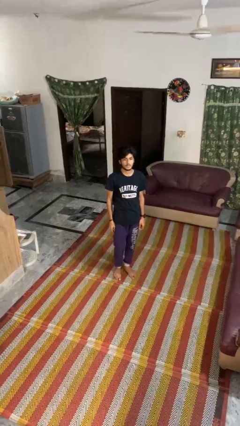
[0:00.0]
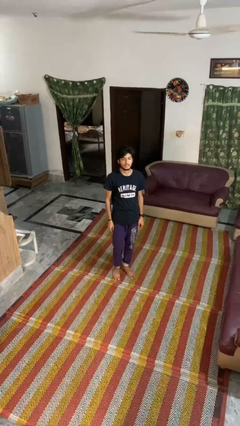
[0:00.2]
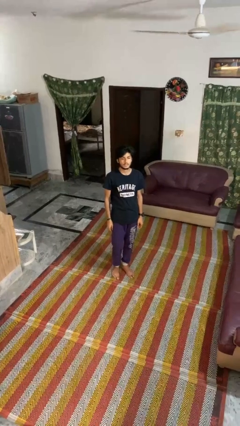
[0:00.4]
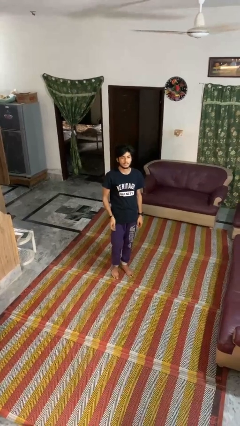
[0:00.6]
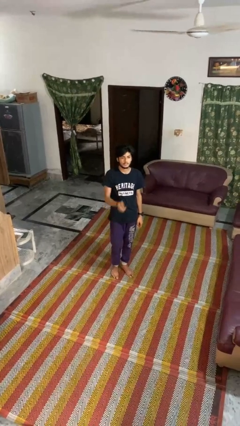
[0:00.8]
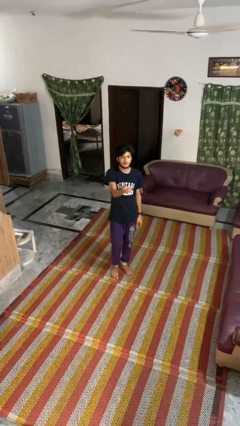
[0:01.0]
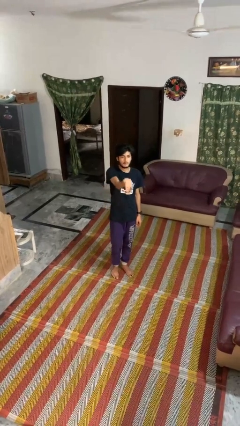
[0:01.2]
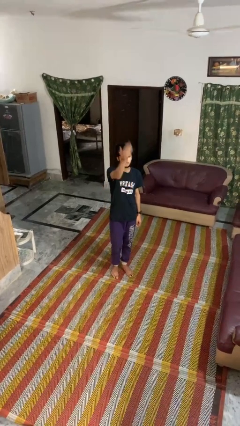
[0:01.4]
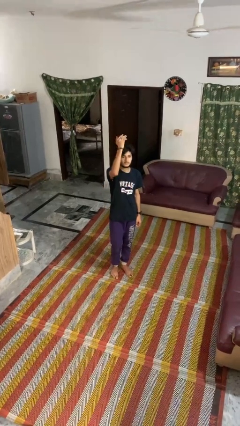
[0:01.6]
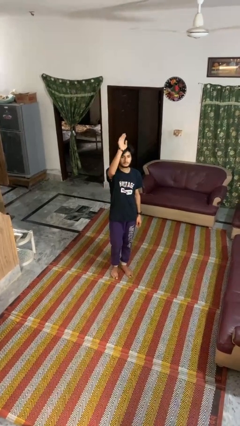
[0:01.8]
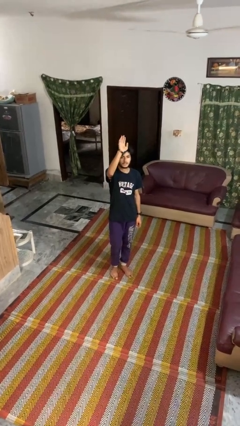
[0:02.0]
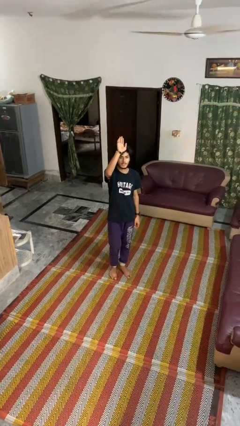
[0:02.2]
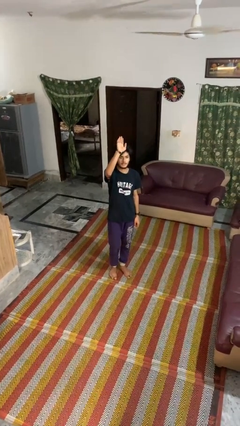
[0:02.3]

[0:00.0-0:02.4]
person gestures swipe up

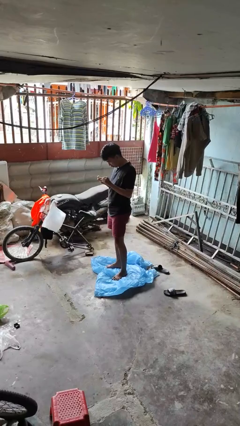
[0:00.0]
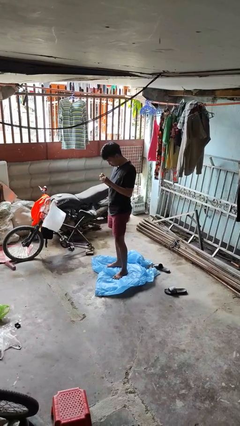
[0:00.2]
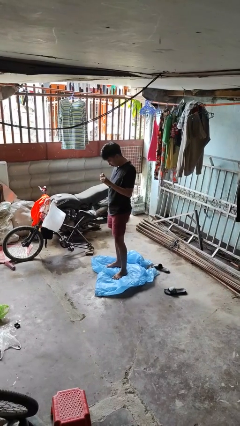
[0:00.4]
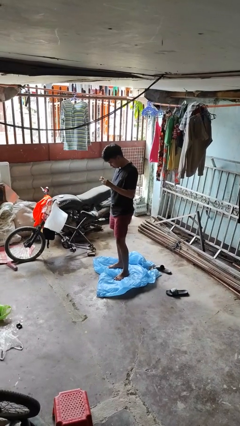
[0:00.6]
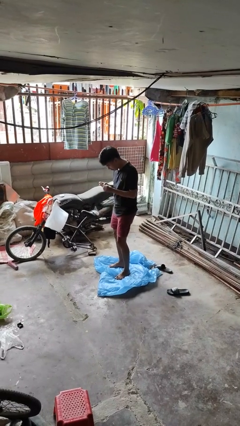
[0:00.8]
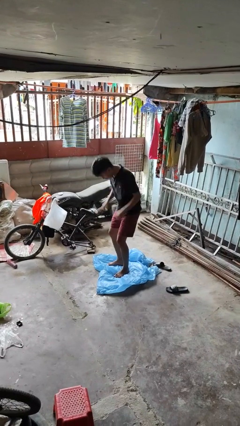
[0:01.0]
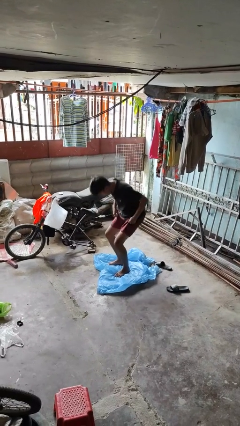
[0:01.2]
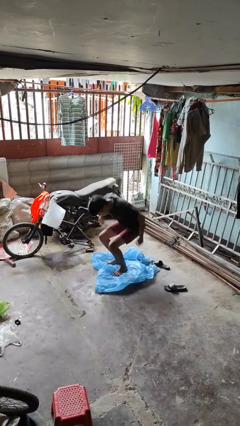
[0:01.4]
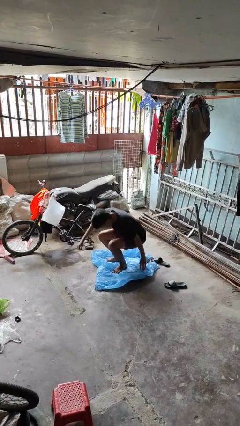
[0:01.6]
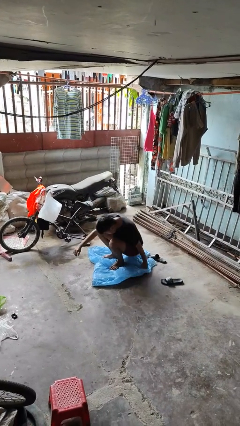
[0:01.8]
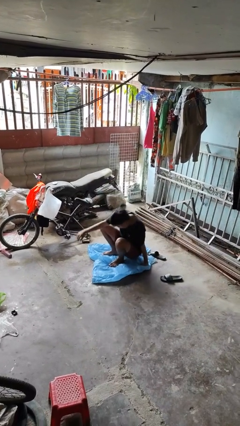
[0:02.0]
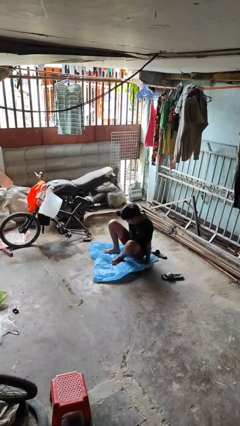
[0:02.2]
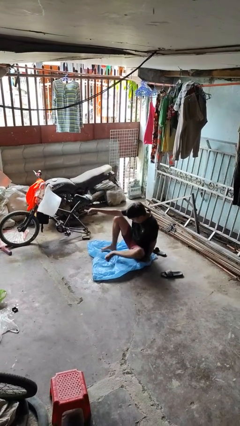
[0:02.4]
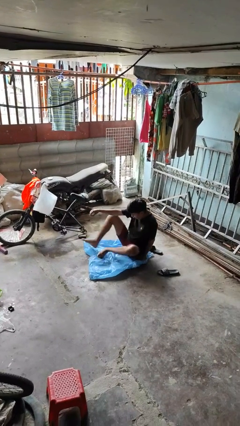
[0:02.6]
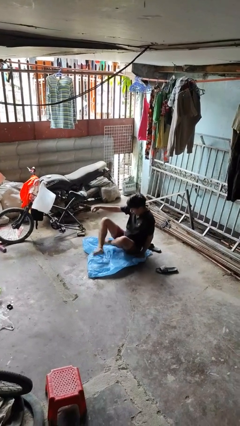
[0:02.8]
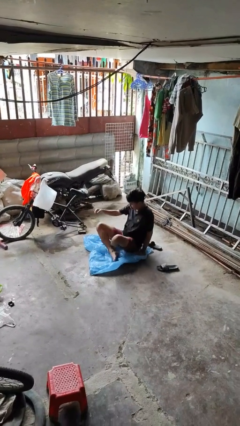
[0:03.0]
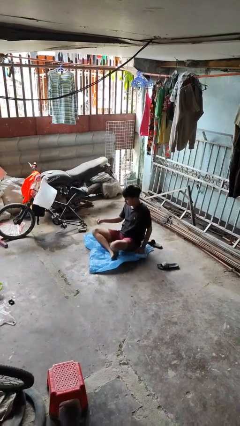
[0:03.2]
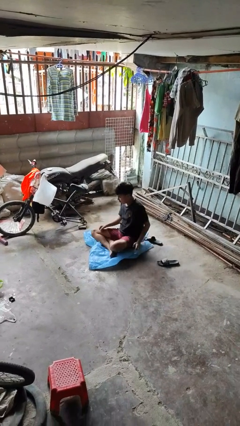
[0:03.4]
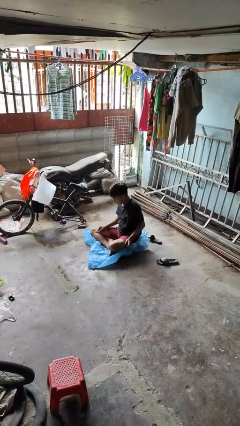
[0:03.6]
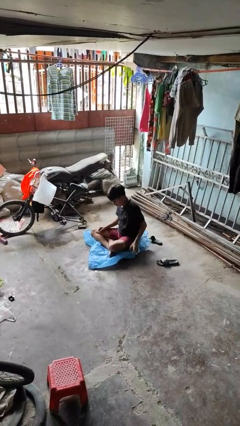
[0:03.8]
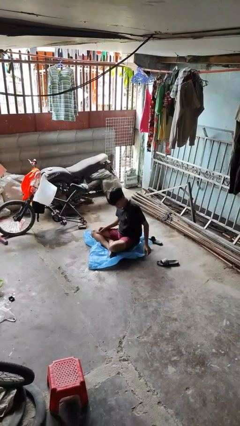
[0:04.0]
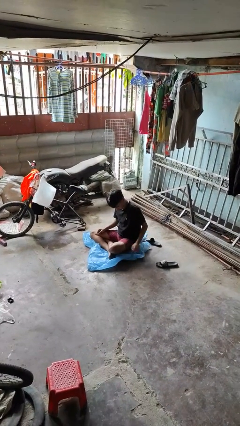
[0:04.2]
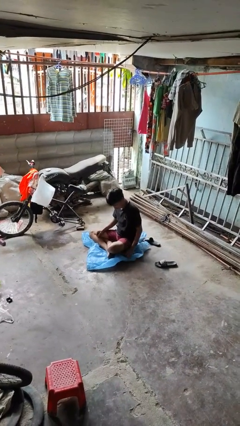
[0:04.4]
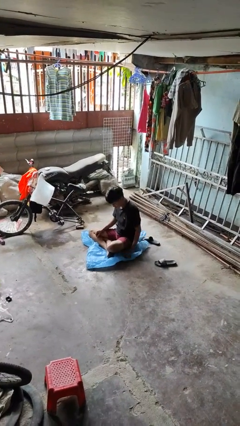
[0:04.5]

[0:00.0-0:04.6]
person sits crisscross

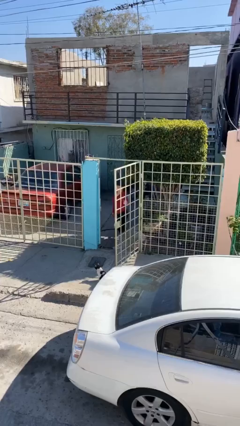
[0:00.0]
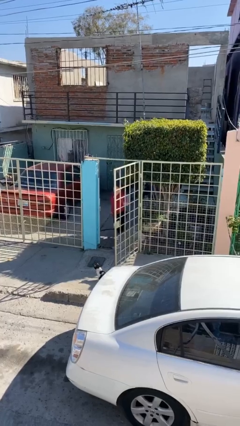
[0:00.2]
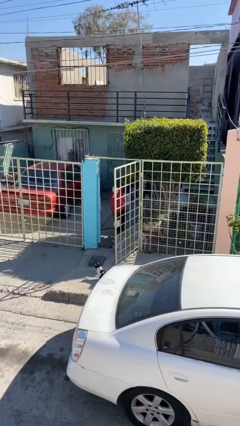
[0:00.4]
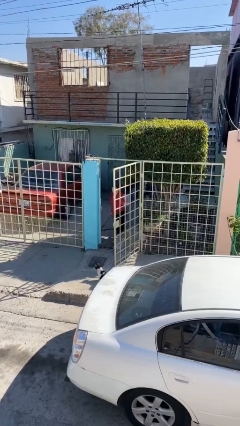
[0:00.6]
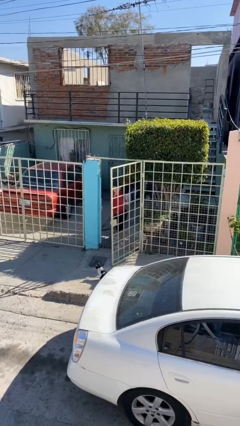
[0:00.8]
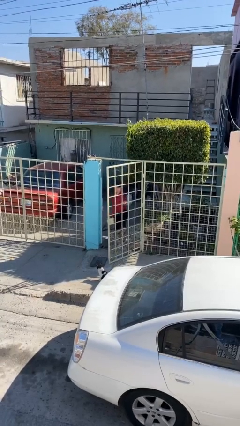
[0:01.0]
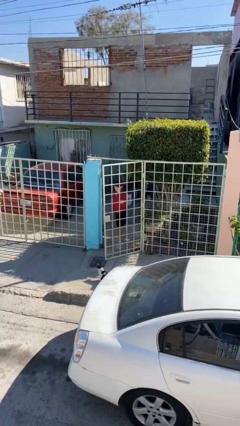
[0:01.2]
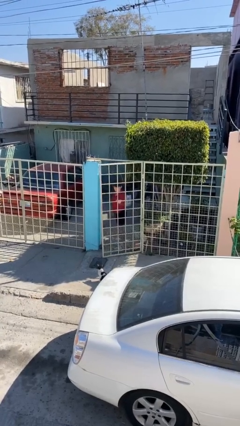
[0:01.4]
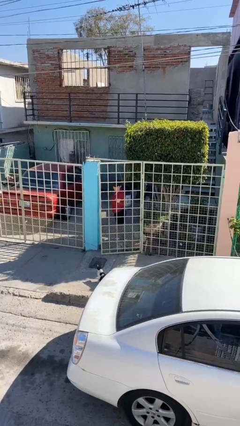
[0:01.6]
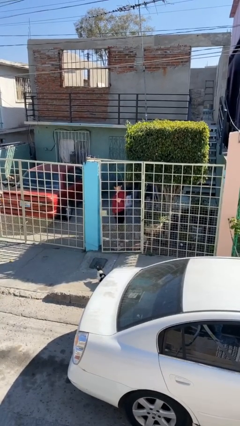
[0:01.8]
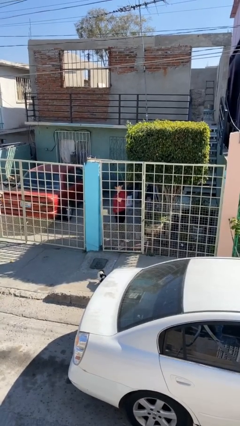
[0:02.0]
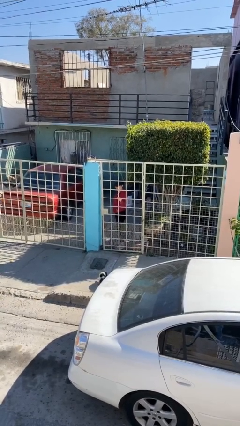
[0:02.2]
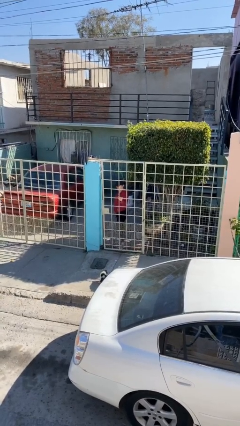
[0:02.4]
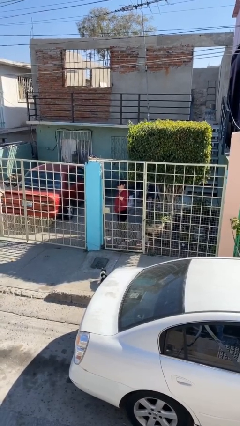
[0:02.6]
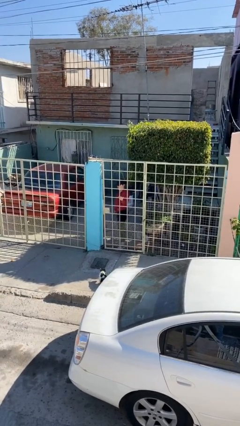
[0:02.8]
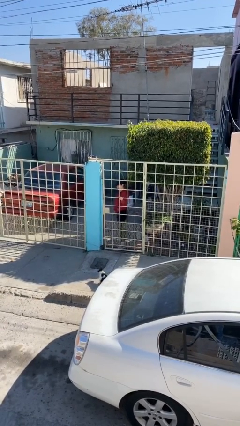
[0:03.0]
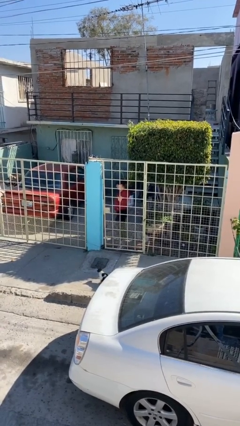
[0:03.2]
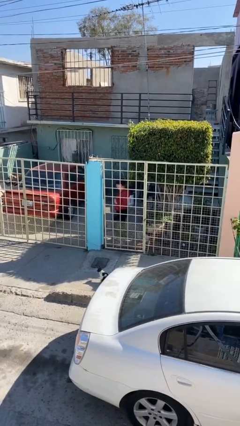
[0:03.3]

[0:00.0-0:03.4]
person closes facility door

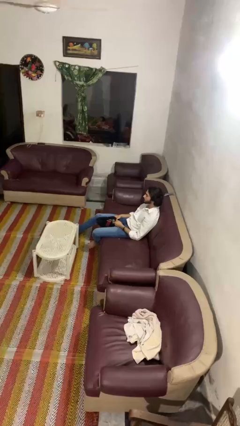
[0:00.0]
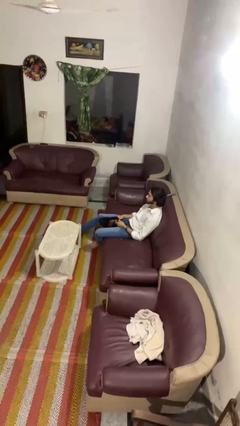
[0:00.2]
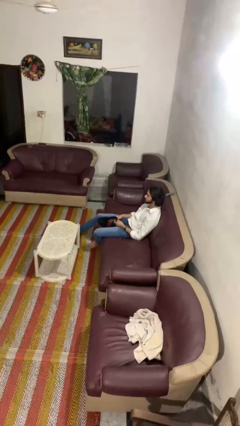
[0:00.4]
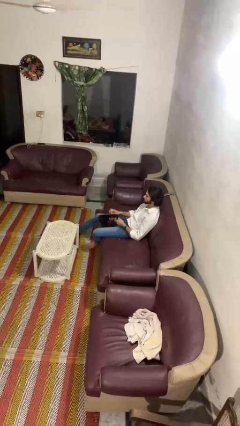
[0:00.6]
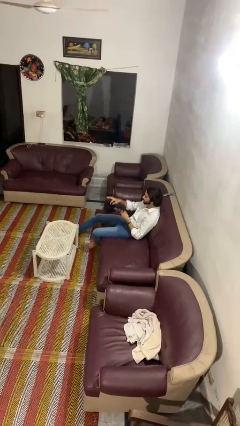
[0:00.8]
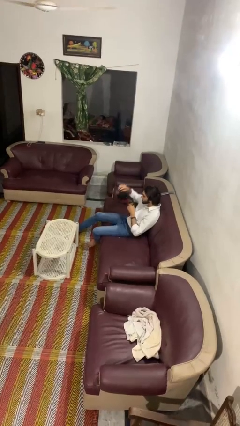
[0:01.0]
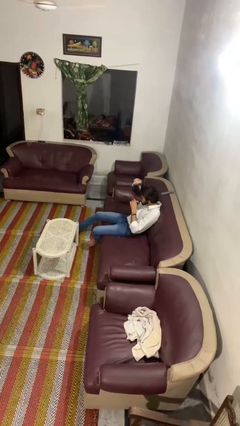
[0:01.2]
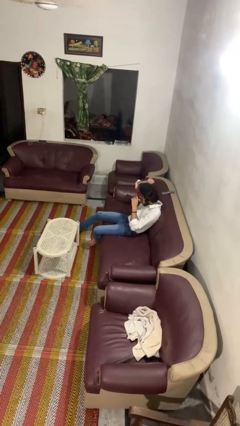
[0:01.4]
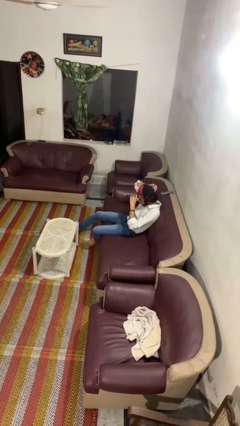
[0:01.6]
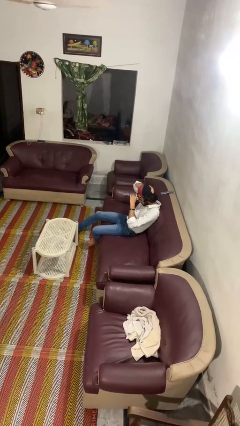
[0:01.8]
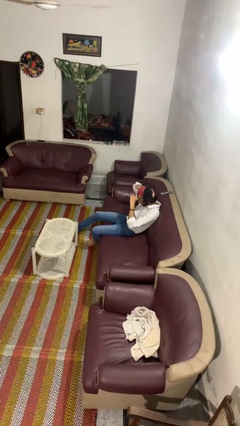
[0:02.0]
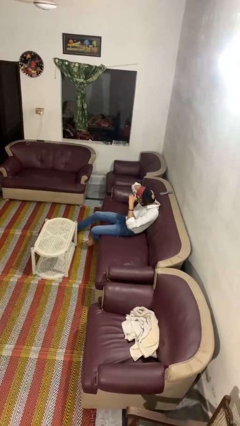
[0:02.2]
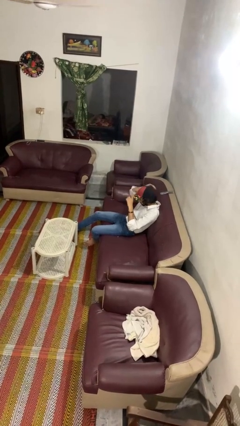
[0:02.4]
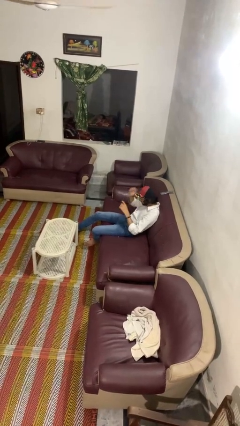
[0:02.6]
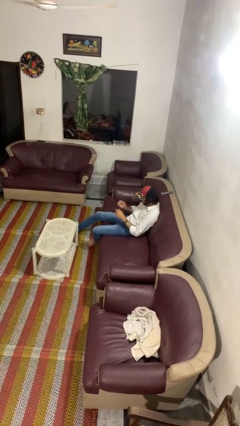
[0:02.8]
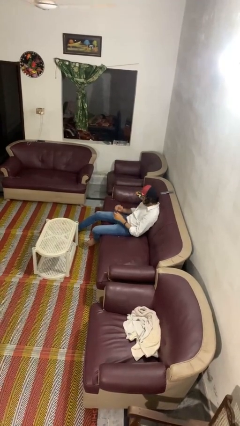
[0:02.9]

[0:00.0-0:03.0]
person puts on hat

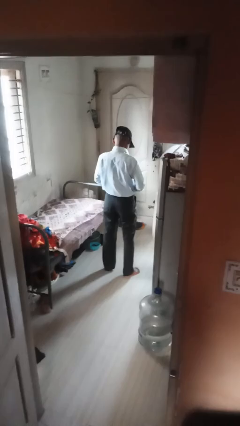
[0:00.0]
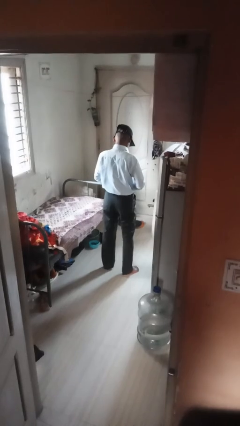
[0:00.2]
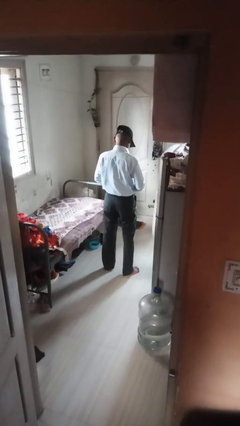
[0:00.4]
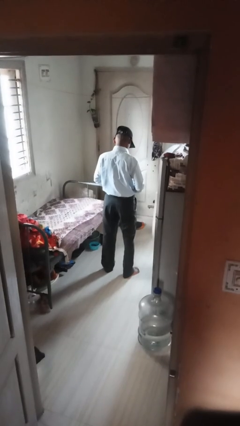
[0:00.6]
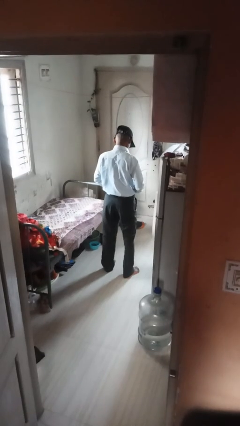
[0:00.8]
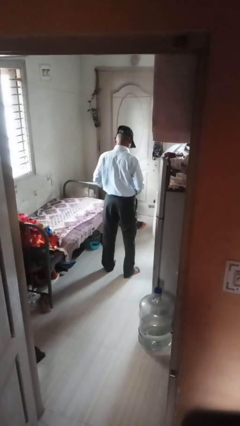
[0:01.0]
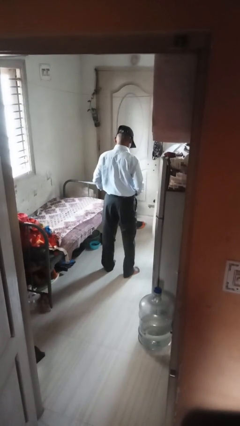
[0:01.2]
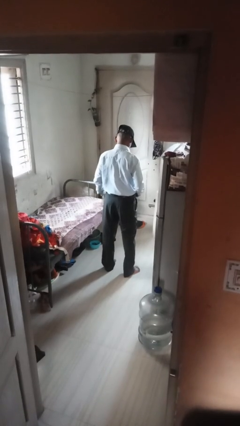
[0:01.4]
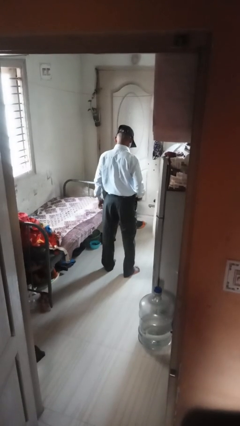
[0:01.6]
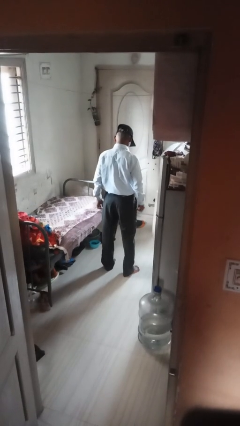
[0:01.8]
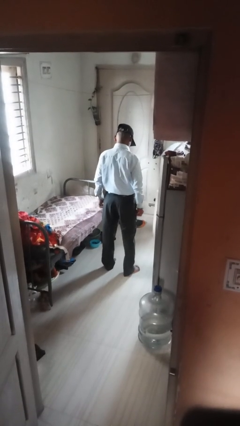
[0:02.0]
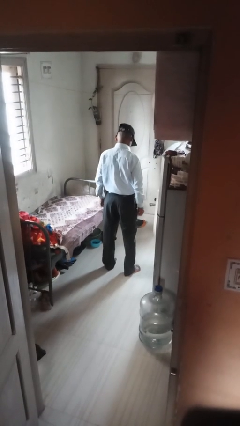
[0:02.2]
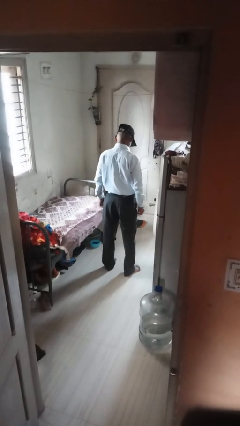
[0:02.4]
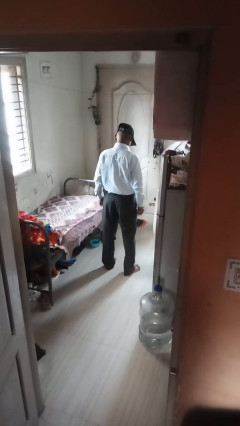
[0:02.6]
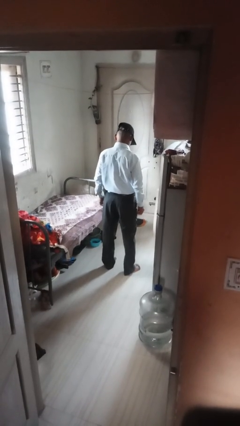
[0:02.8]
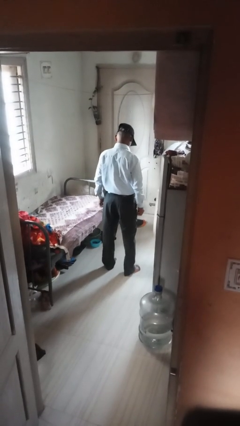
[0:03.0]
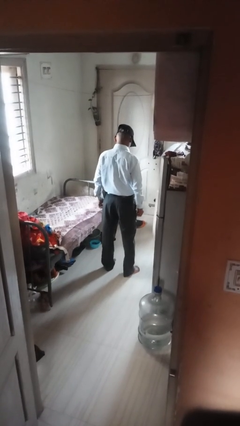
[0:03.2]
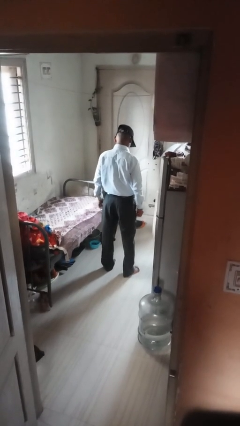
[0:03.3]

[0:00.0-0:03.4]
person hikes up pants

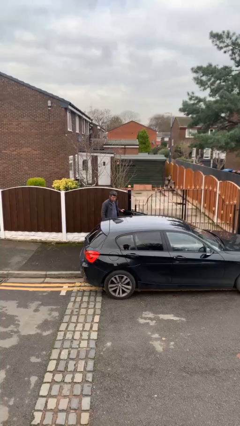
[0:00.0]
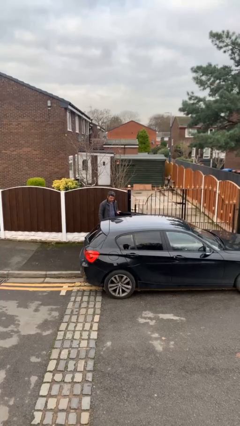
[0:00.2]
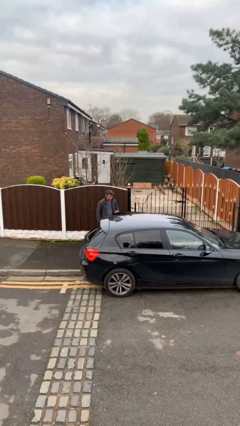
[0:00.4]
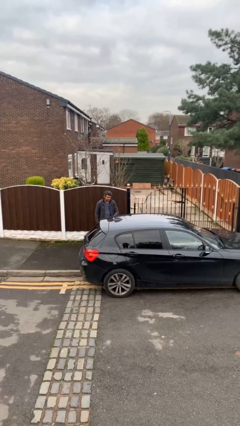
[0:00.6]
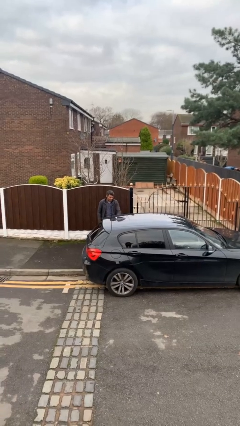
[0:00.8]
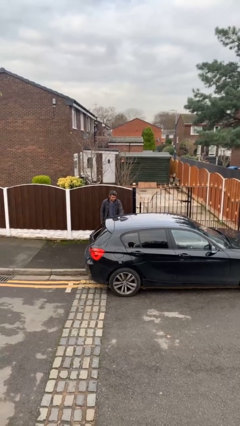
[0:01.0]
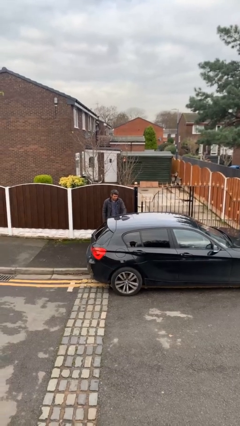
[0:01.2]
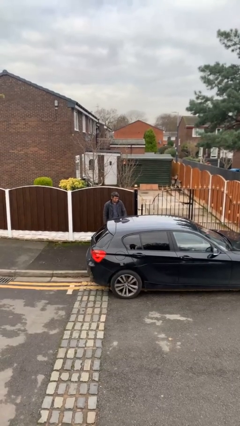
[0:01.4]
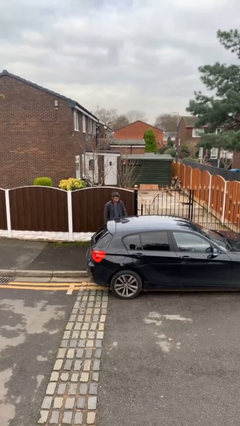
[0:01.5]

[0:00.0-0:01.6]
person closes car door
